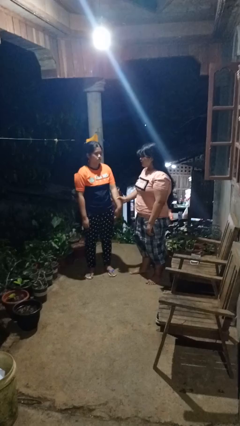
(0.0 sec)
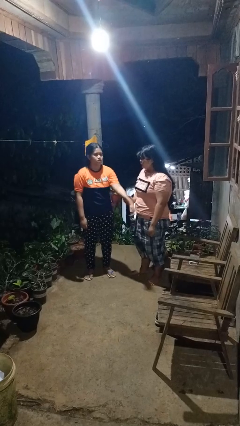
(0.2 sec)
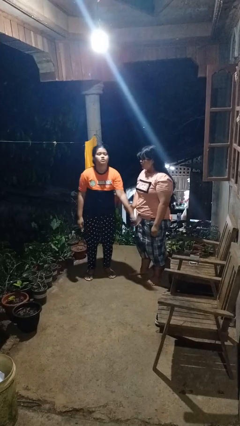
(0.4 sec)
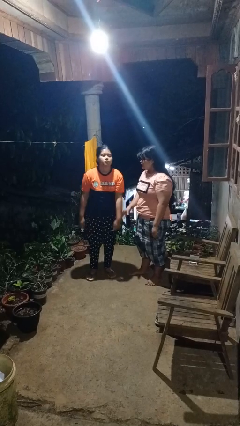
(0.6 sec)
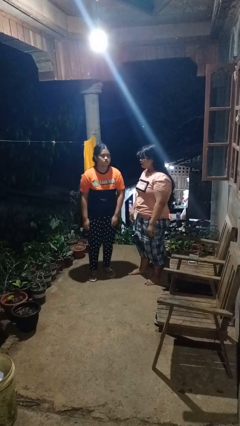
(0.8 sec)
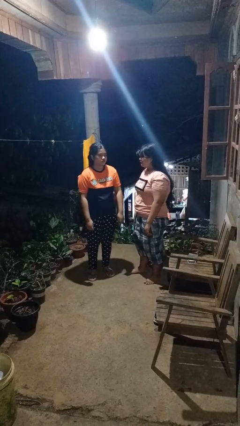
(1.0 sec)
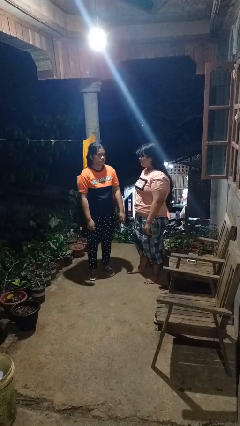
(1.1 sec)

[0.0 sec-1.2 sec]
person grabs person by forearm

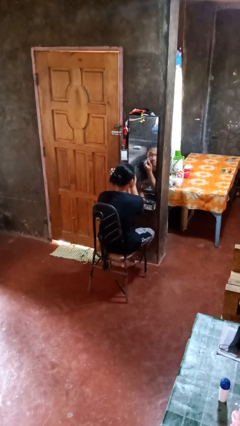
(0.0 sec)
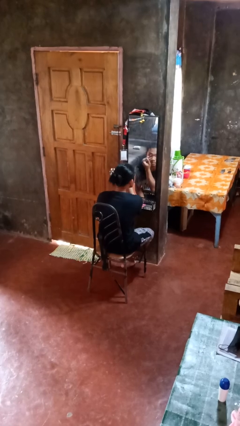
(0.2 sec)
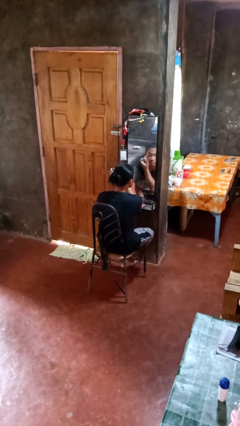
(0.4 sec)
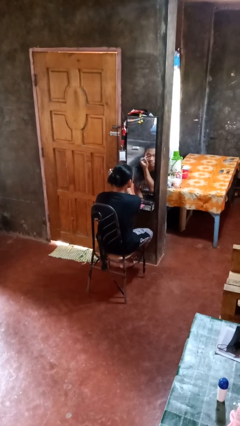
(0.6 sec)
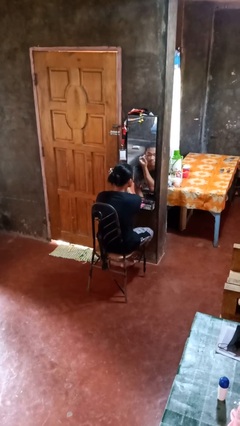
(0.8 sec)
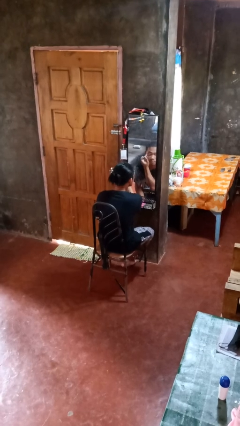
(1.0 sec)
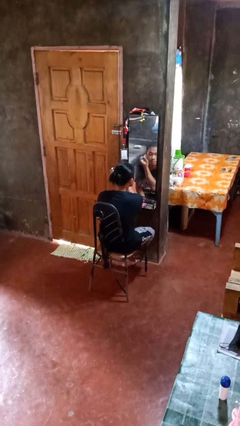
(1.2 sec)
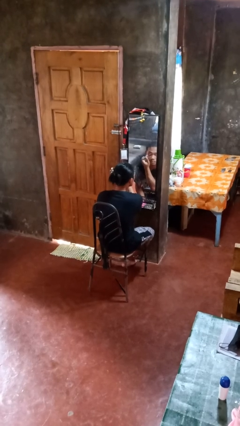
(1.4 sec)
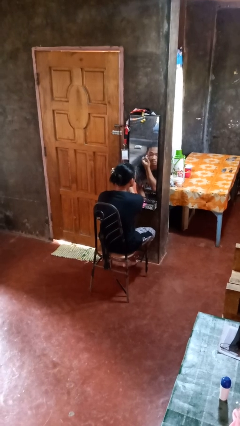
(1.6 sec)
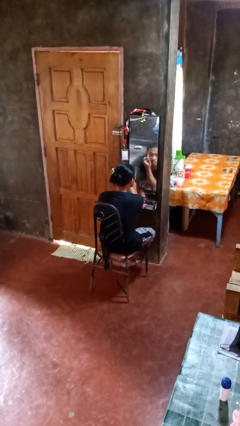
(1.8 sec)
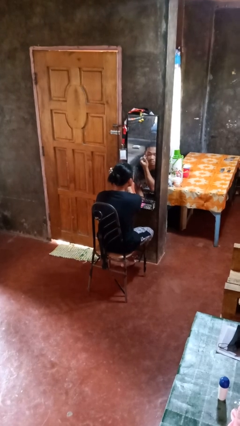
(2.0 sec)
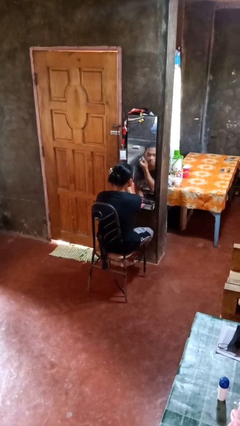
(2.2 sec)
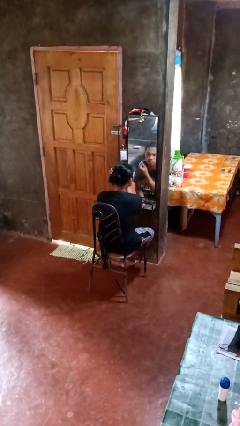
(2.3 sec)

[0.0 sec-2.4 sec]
person applies eye makeup

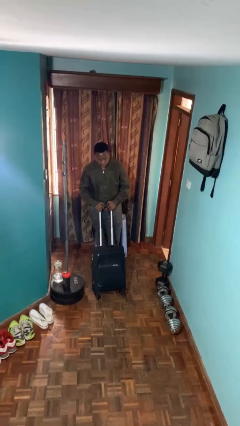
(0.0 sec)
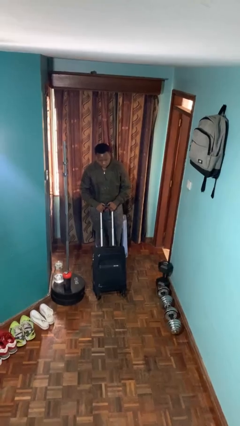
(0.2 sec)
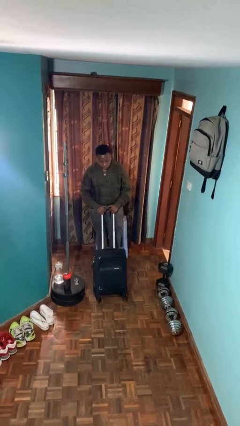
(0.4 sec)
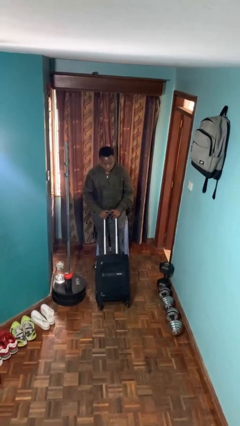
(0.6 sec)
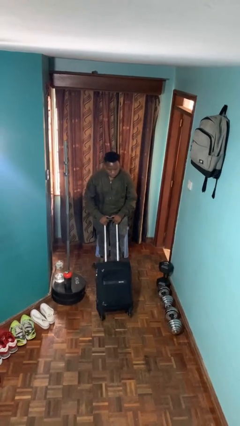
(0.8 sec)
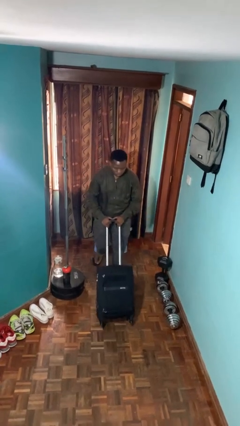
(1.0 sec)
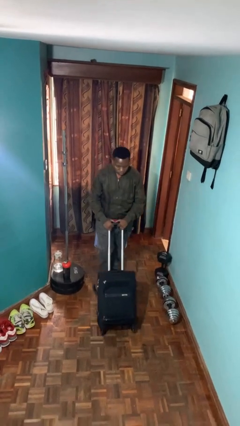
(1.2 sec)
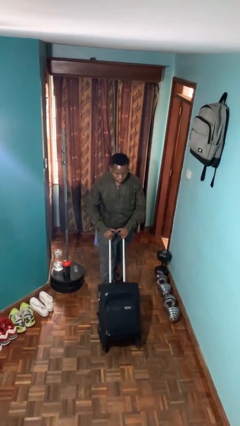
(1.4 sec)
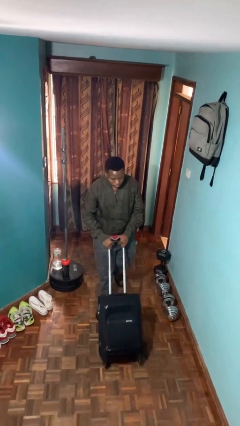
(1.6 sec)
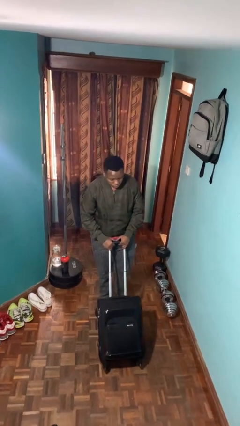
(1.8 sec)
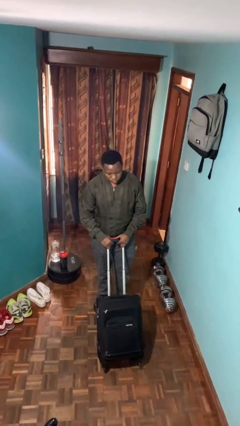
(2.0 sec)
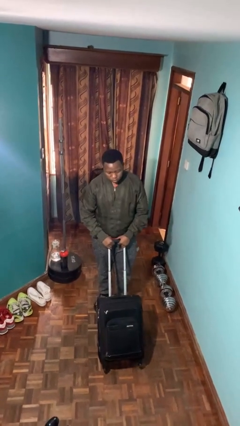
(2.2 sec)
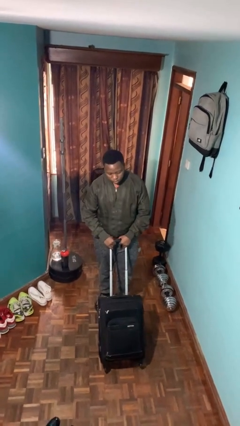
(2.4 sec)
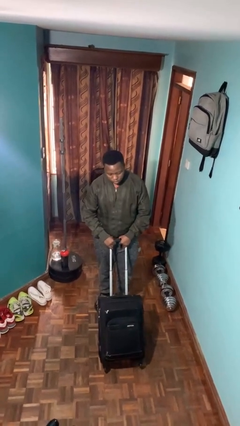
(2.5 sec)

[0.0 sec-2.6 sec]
person pushes wheeled cart

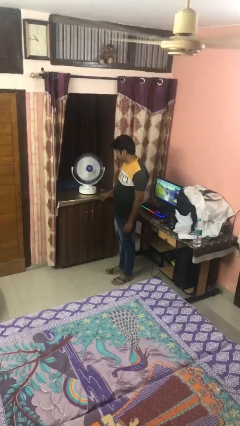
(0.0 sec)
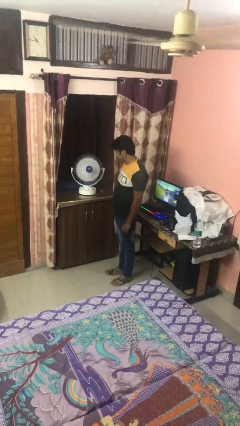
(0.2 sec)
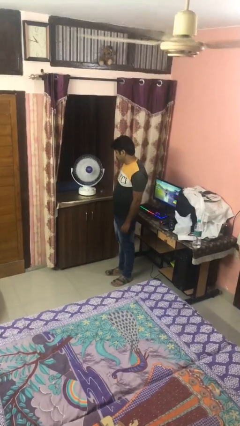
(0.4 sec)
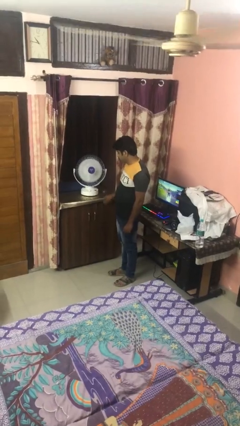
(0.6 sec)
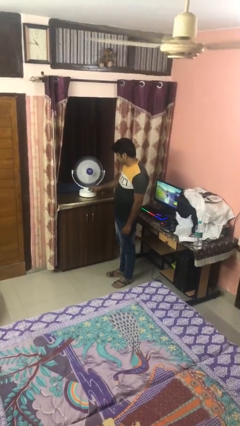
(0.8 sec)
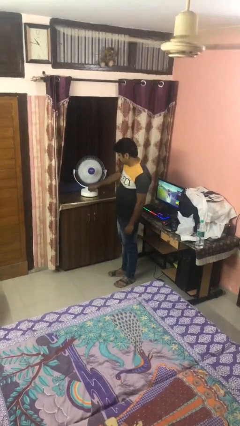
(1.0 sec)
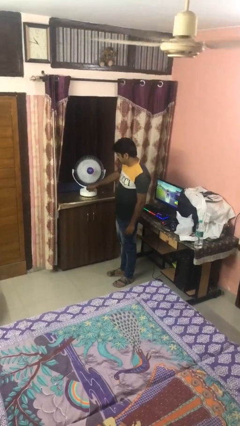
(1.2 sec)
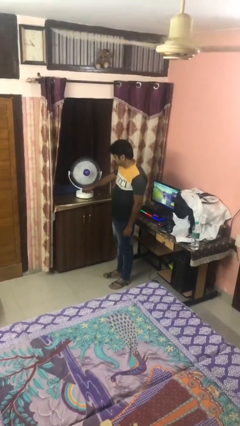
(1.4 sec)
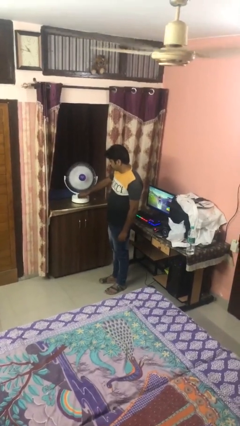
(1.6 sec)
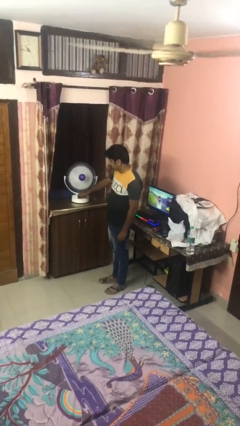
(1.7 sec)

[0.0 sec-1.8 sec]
person turns off fan

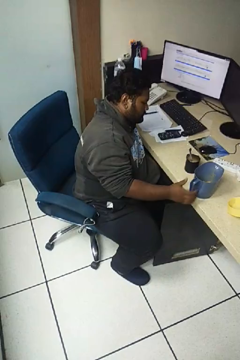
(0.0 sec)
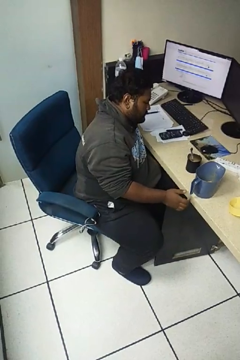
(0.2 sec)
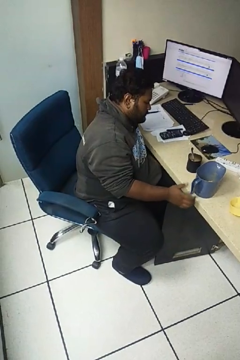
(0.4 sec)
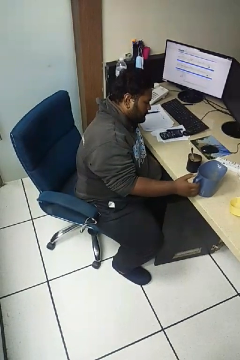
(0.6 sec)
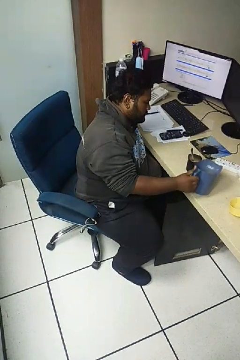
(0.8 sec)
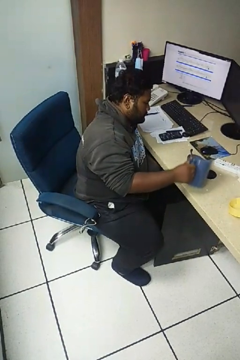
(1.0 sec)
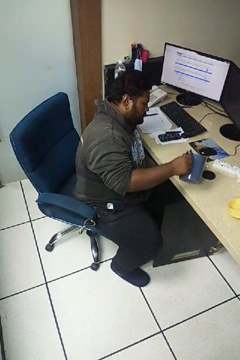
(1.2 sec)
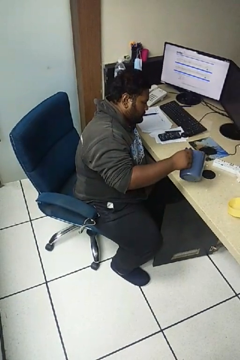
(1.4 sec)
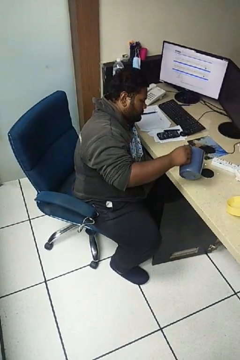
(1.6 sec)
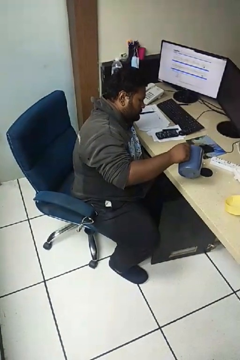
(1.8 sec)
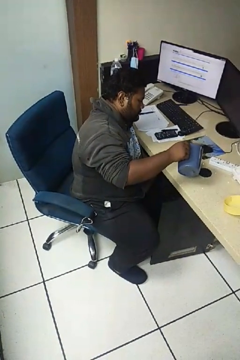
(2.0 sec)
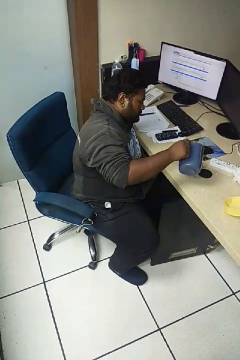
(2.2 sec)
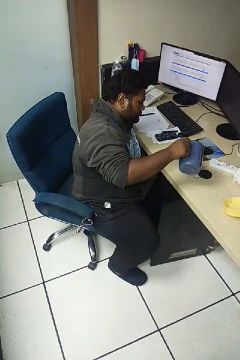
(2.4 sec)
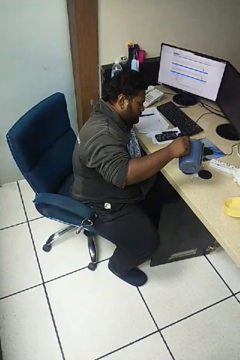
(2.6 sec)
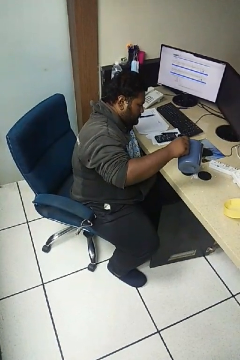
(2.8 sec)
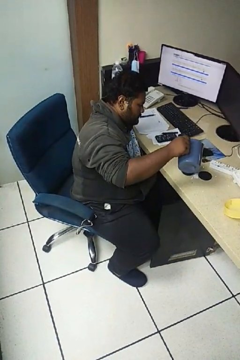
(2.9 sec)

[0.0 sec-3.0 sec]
person pours coffee into mug

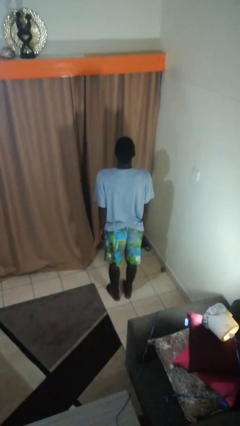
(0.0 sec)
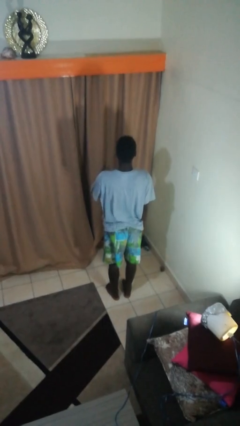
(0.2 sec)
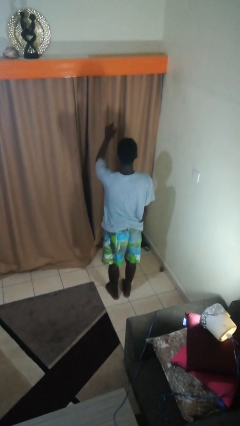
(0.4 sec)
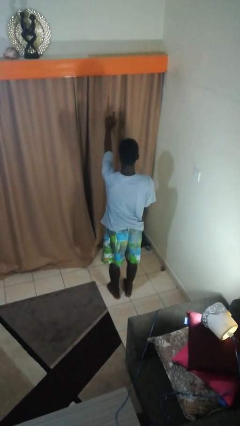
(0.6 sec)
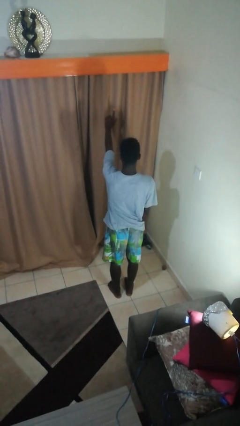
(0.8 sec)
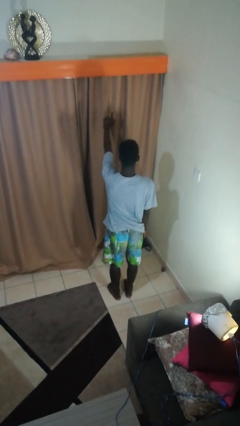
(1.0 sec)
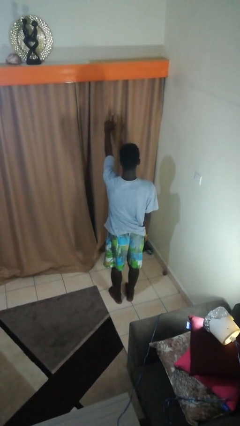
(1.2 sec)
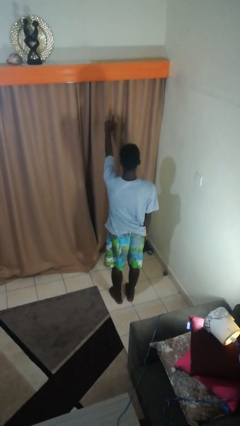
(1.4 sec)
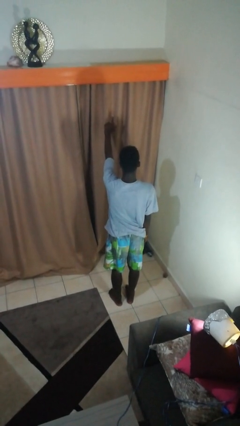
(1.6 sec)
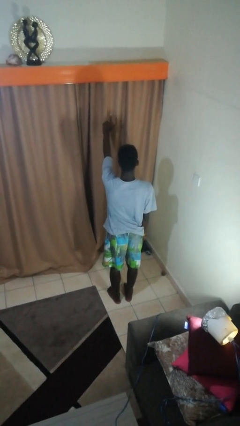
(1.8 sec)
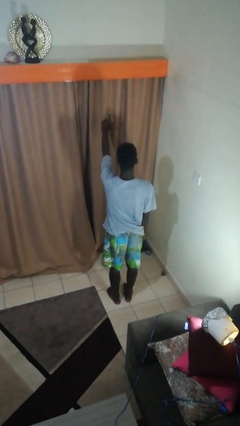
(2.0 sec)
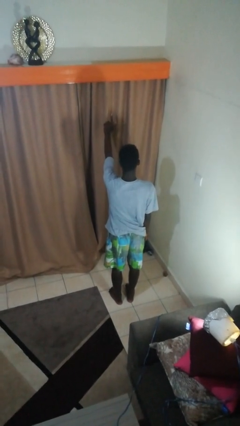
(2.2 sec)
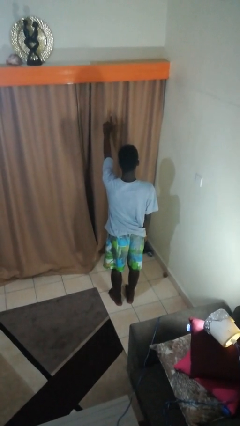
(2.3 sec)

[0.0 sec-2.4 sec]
person gestures number one

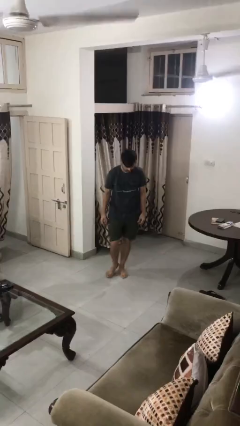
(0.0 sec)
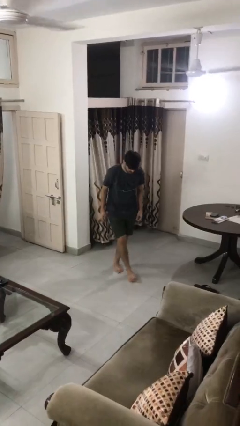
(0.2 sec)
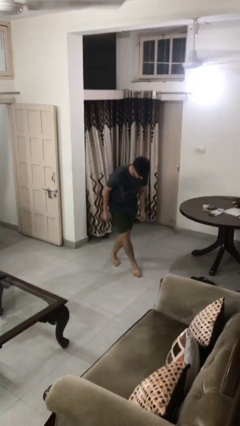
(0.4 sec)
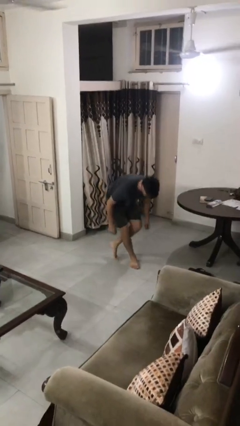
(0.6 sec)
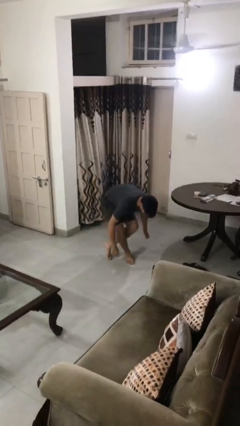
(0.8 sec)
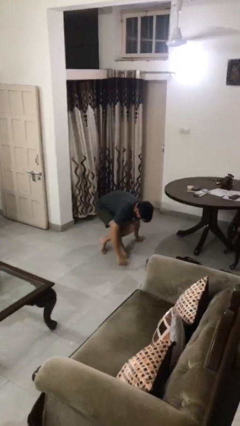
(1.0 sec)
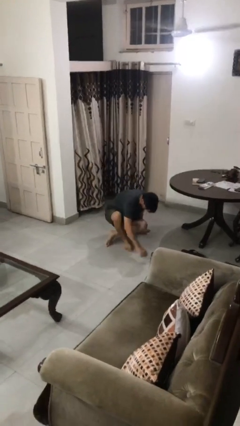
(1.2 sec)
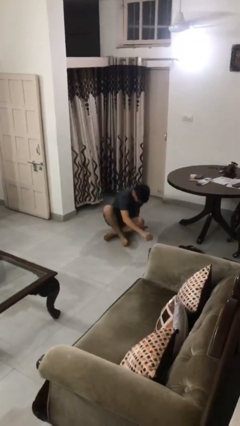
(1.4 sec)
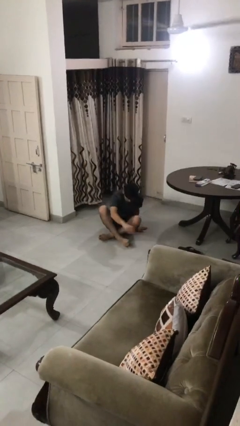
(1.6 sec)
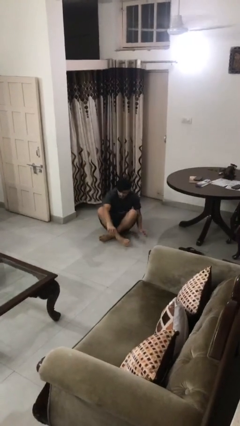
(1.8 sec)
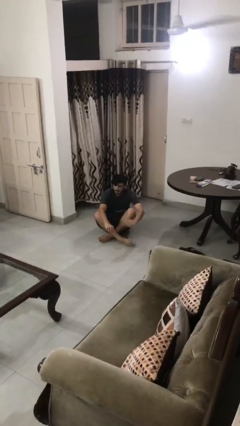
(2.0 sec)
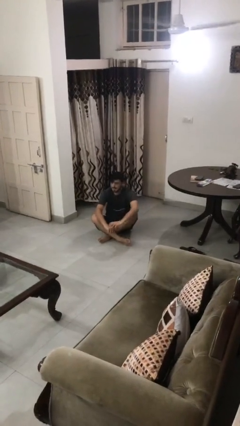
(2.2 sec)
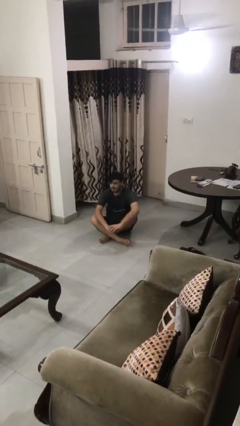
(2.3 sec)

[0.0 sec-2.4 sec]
person sits crisscross

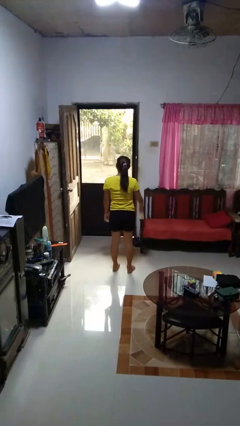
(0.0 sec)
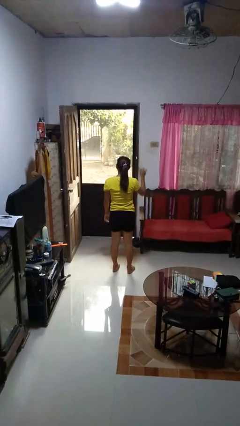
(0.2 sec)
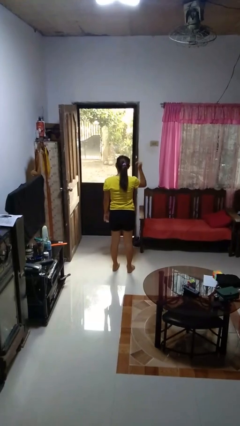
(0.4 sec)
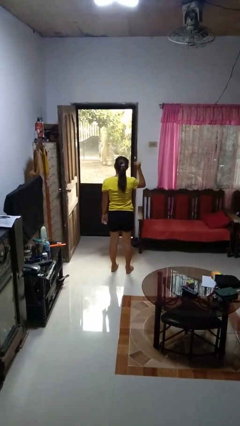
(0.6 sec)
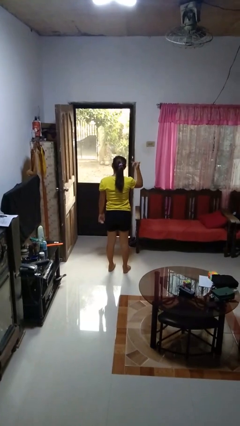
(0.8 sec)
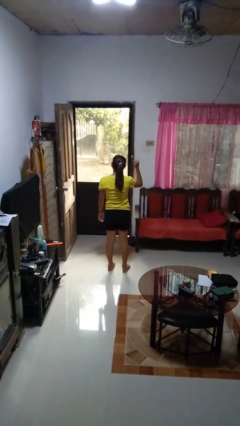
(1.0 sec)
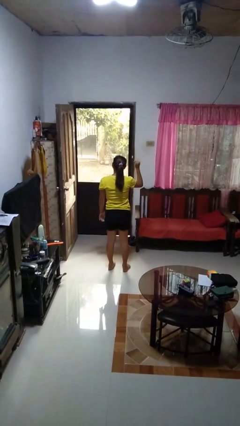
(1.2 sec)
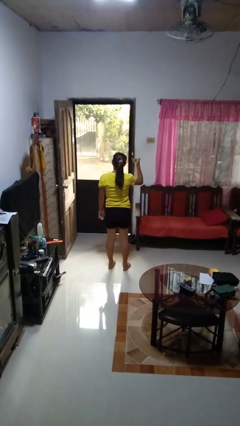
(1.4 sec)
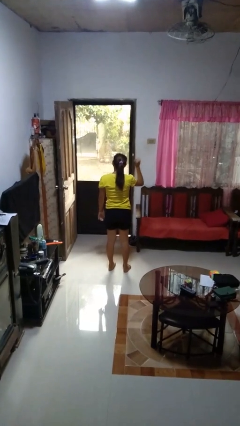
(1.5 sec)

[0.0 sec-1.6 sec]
person gestures hang loose
